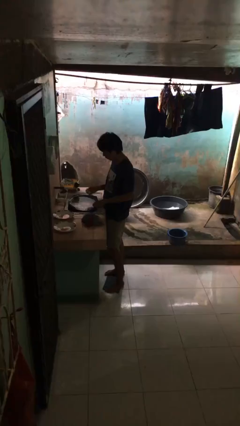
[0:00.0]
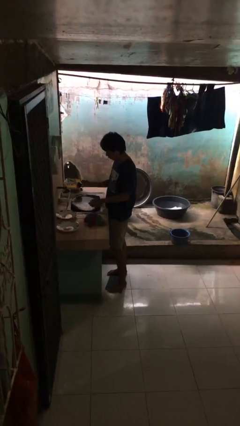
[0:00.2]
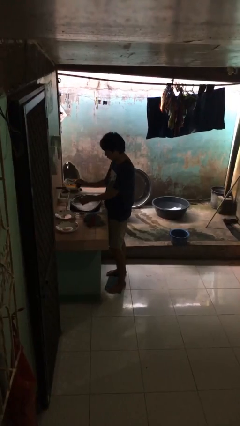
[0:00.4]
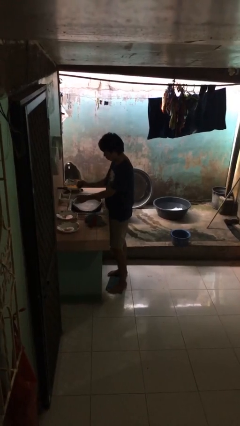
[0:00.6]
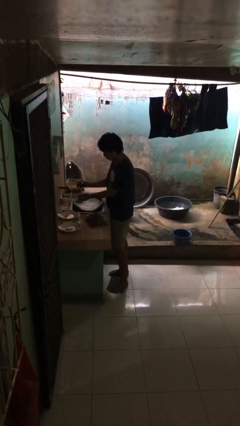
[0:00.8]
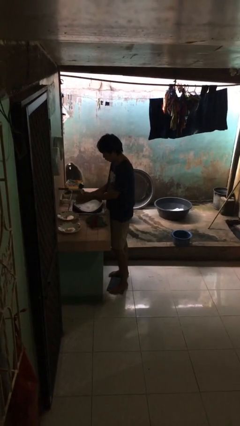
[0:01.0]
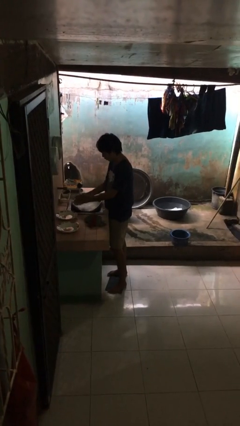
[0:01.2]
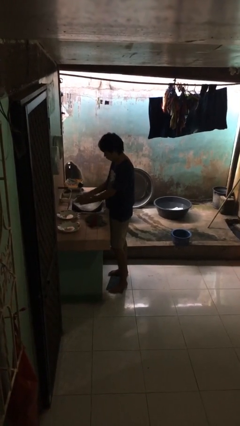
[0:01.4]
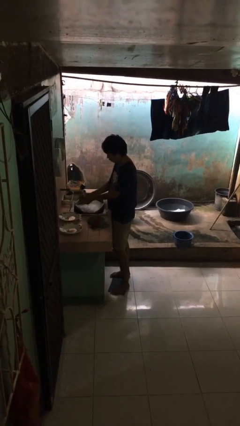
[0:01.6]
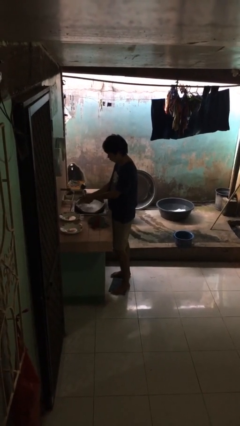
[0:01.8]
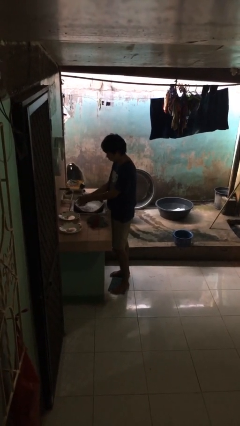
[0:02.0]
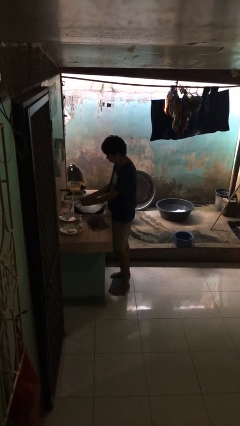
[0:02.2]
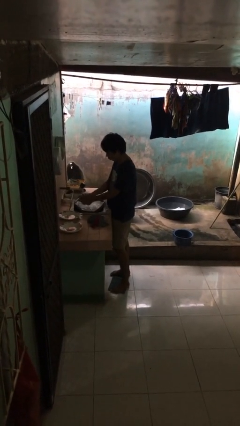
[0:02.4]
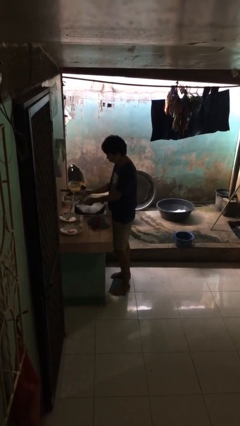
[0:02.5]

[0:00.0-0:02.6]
person washes hands

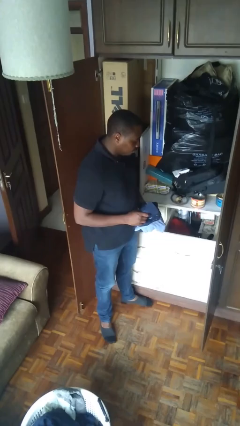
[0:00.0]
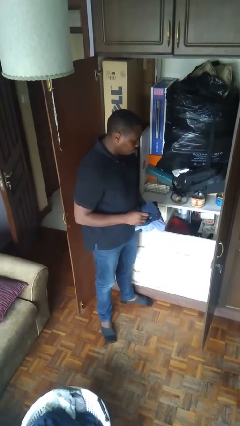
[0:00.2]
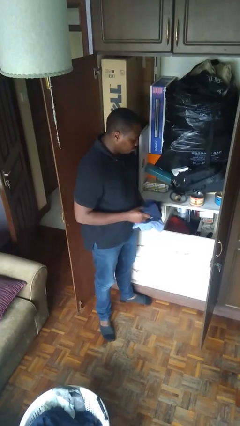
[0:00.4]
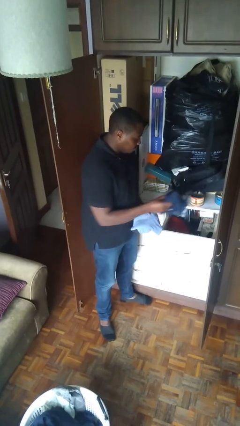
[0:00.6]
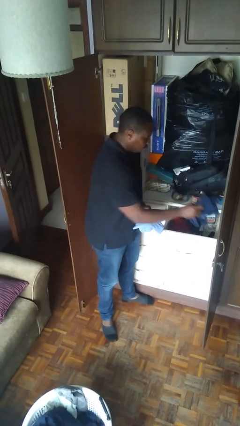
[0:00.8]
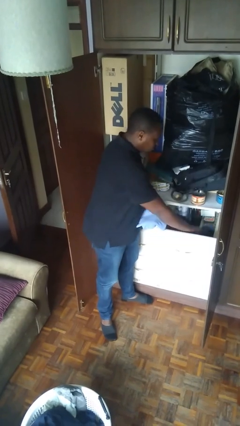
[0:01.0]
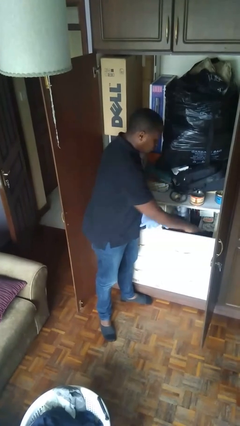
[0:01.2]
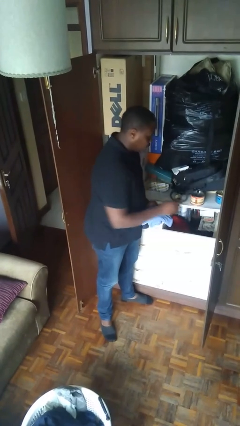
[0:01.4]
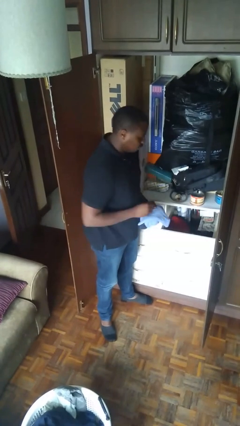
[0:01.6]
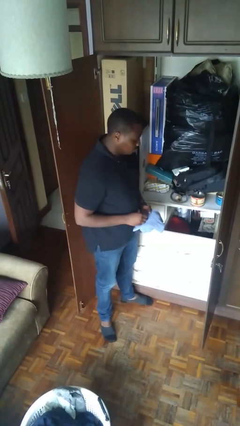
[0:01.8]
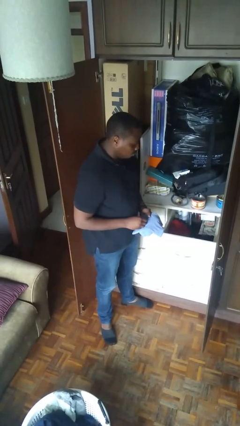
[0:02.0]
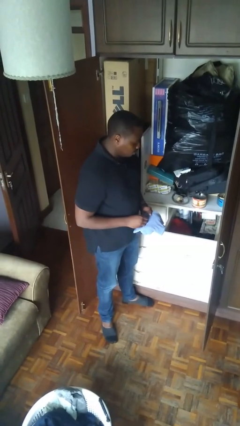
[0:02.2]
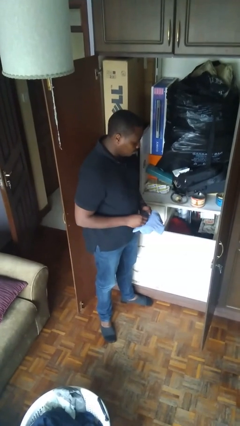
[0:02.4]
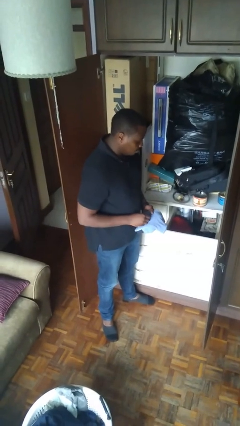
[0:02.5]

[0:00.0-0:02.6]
person puts clothes into dresser

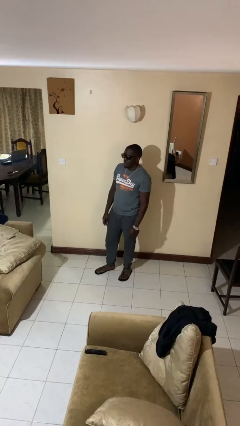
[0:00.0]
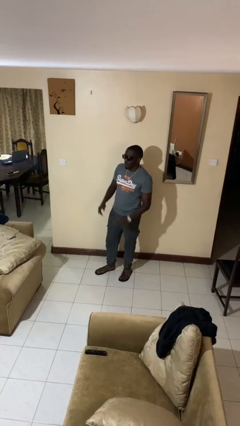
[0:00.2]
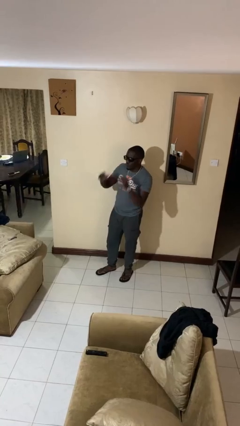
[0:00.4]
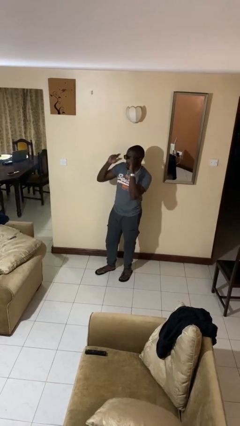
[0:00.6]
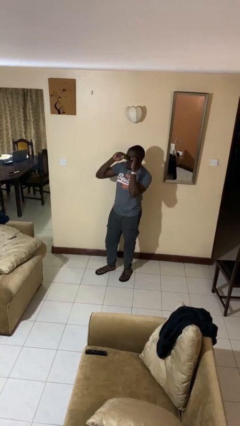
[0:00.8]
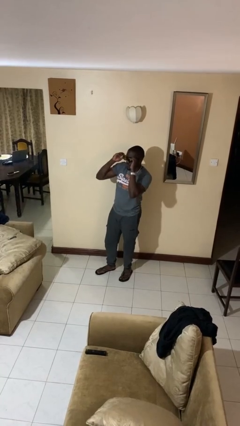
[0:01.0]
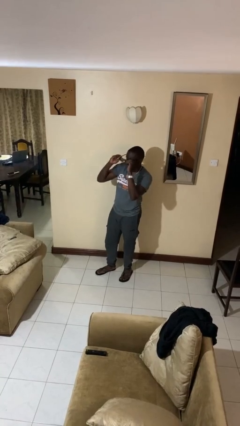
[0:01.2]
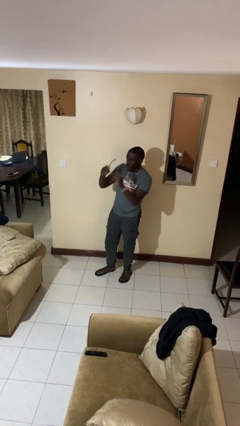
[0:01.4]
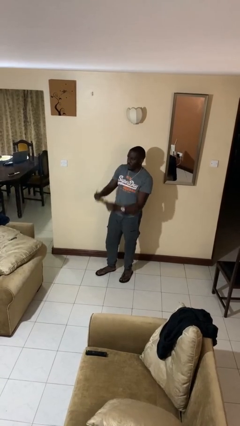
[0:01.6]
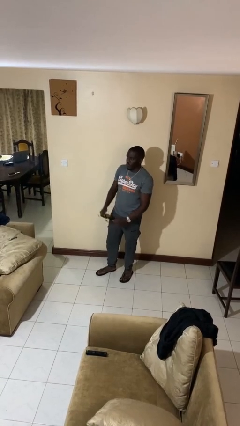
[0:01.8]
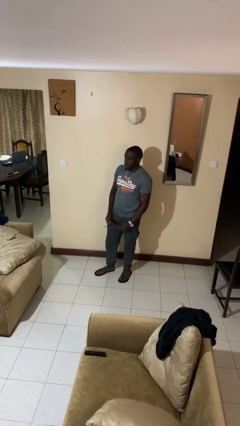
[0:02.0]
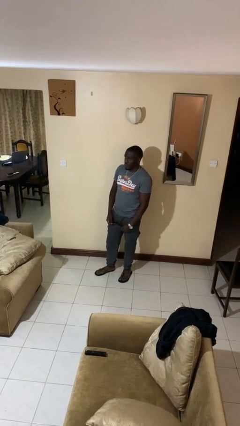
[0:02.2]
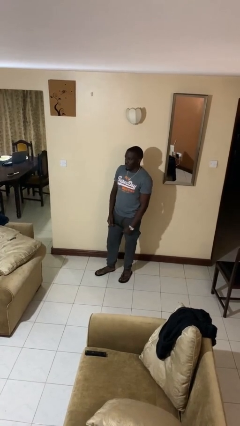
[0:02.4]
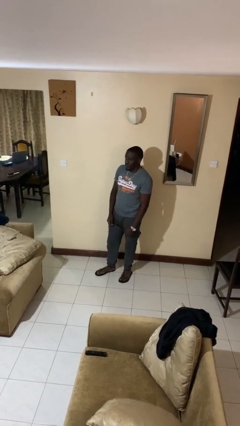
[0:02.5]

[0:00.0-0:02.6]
person takes off sunglasses

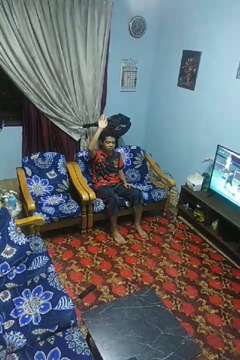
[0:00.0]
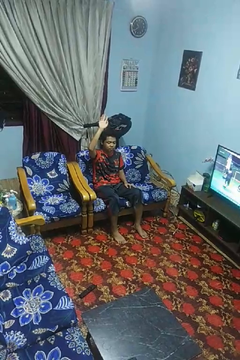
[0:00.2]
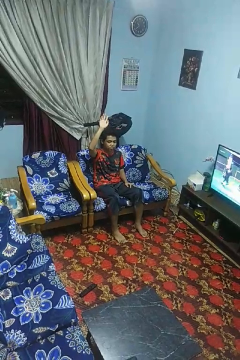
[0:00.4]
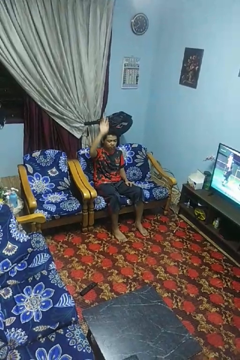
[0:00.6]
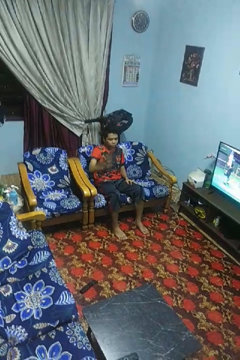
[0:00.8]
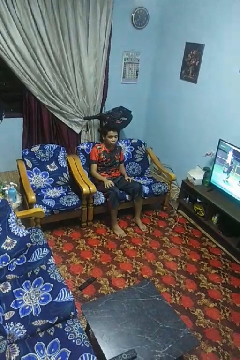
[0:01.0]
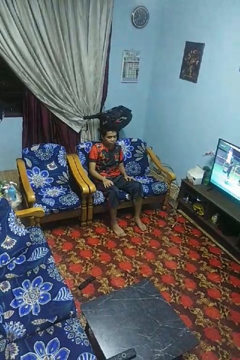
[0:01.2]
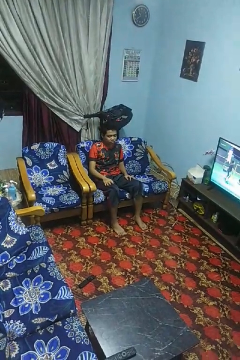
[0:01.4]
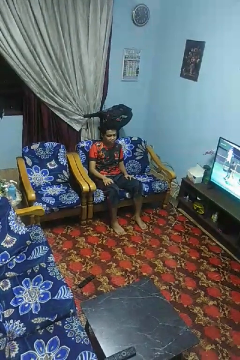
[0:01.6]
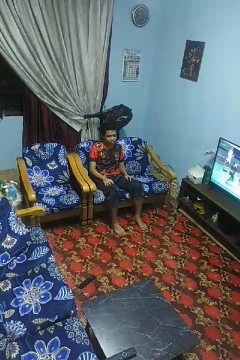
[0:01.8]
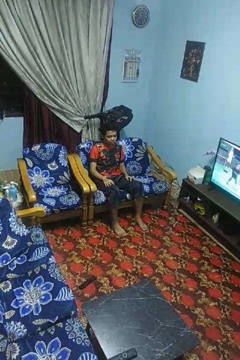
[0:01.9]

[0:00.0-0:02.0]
person gestures lower hand

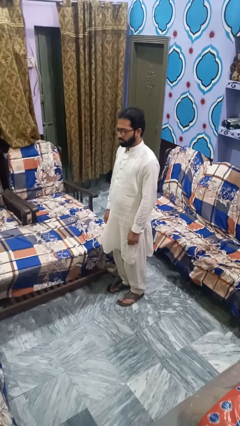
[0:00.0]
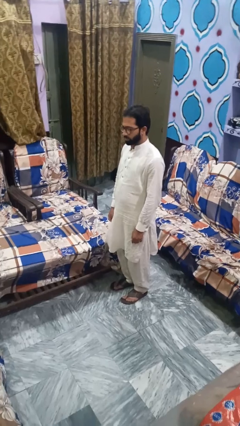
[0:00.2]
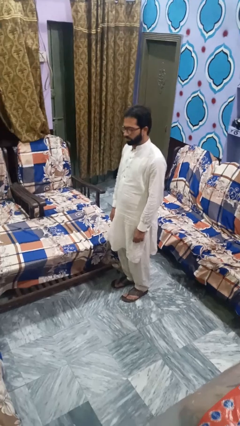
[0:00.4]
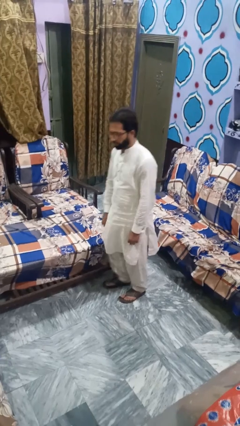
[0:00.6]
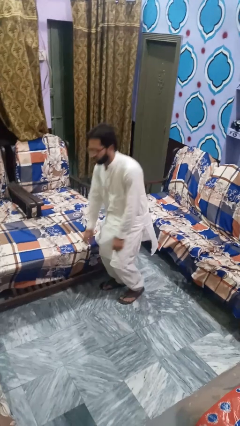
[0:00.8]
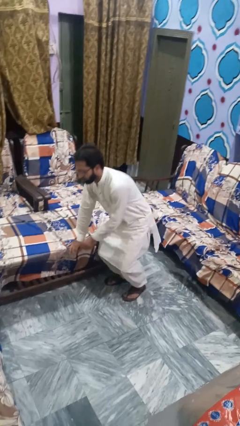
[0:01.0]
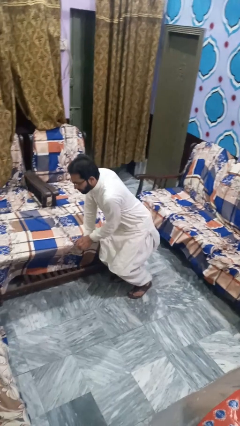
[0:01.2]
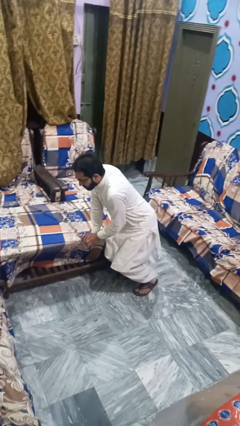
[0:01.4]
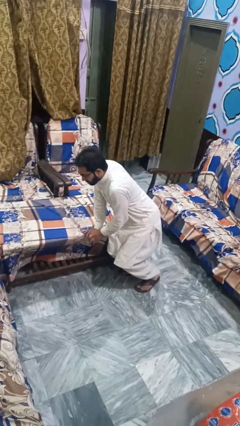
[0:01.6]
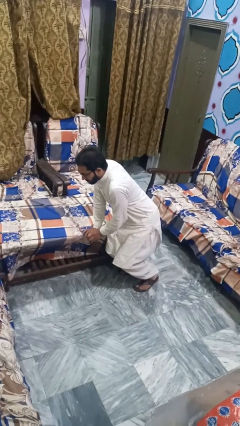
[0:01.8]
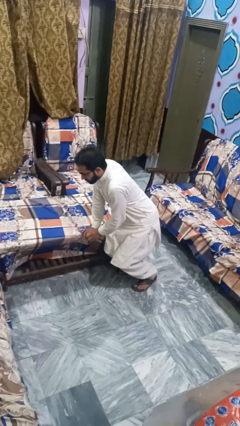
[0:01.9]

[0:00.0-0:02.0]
person trips on object on floor

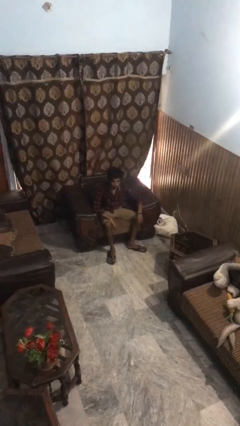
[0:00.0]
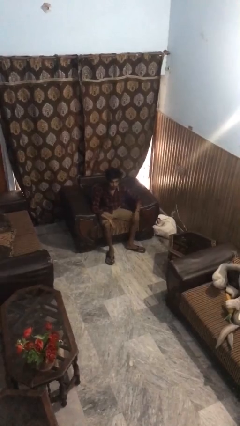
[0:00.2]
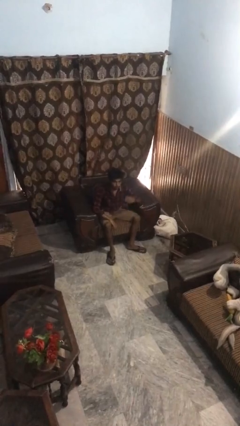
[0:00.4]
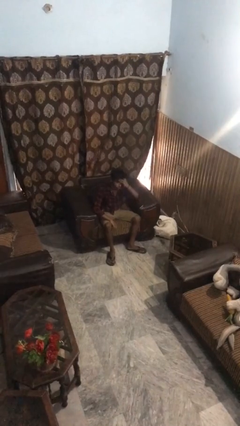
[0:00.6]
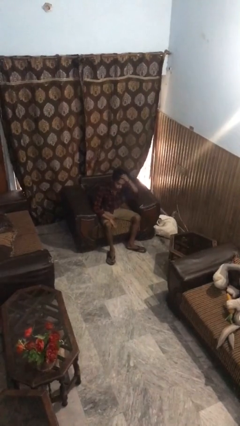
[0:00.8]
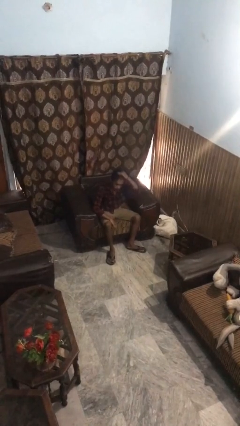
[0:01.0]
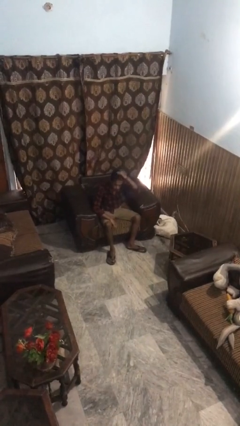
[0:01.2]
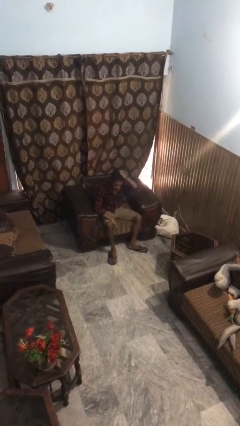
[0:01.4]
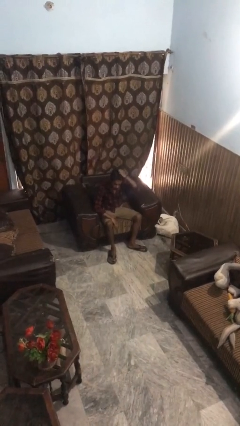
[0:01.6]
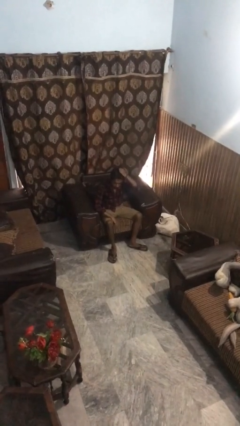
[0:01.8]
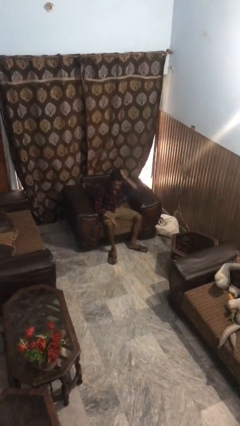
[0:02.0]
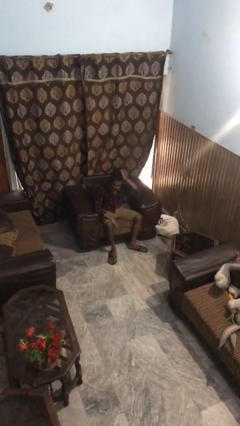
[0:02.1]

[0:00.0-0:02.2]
person strokes hair

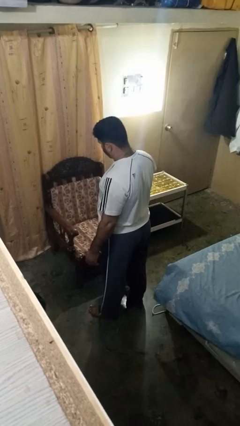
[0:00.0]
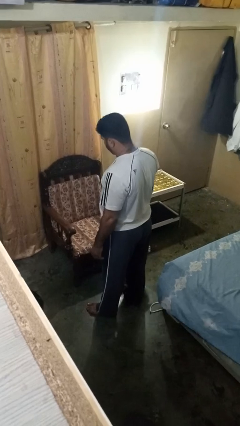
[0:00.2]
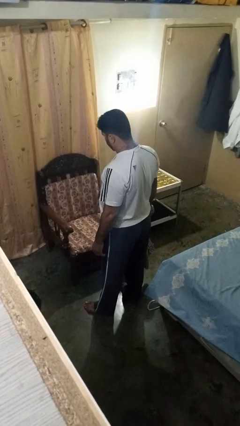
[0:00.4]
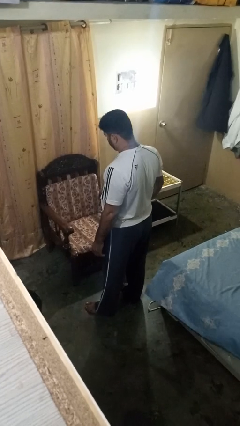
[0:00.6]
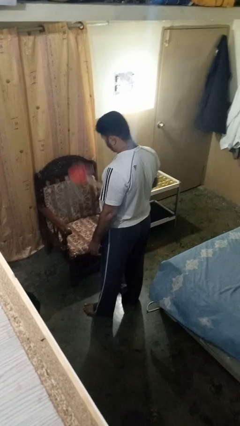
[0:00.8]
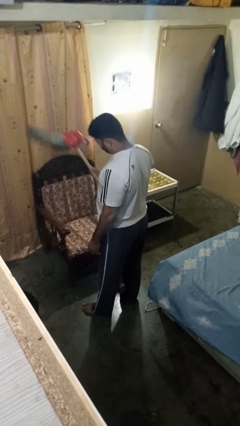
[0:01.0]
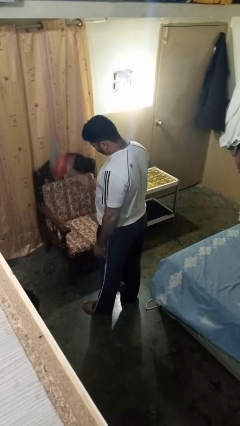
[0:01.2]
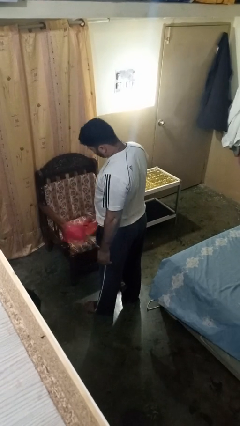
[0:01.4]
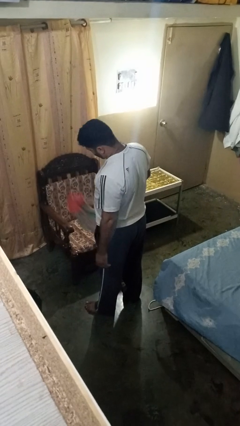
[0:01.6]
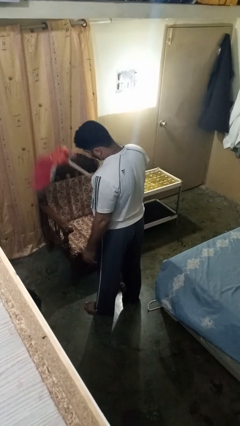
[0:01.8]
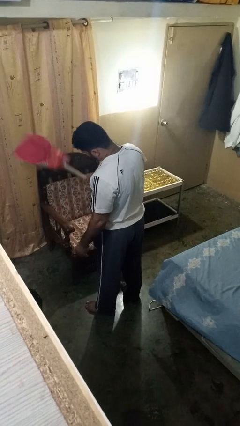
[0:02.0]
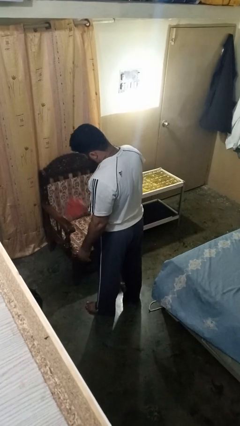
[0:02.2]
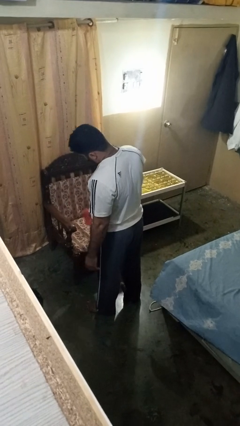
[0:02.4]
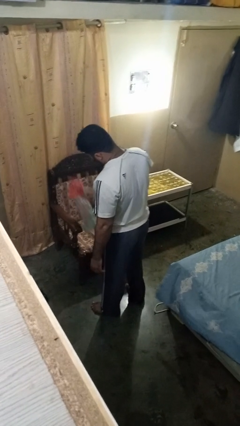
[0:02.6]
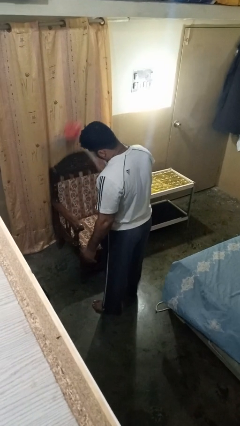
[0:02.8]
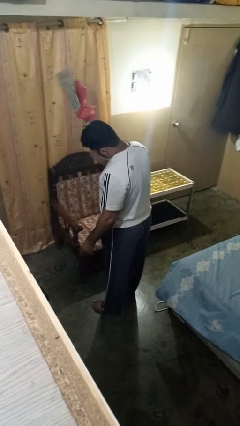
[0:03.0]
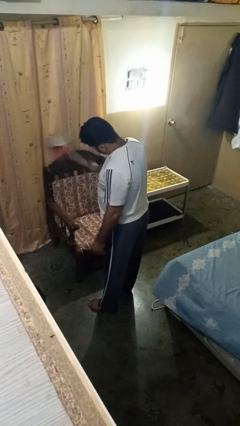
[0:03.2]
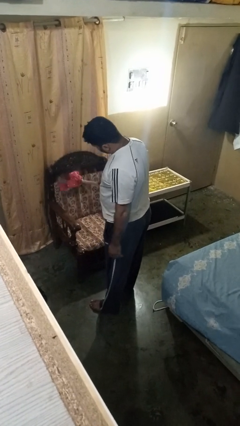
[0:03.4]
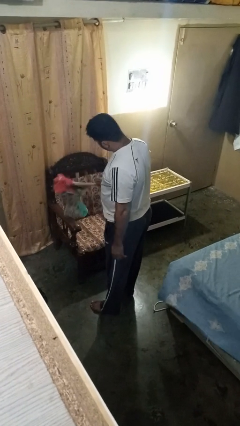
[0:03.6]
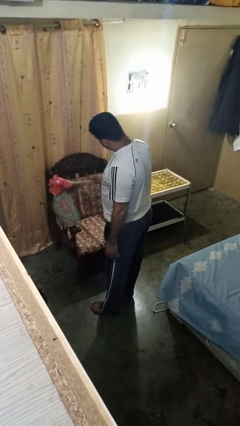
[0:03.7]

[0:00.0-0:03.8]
person dusts furniture
